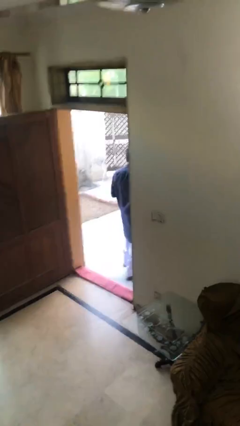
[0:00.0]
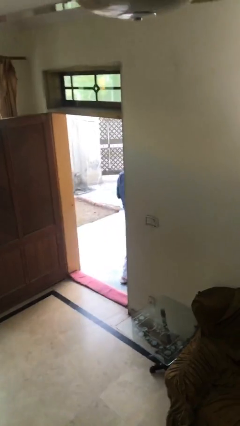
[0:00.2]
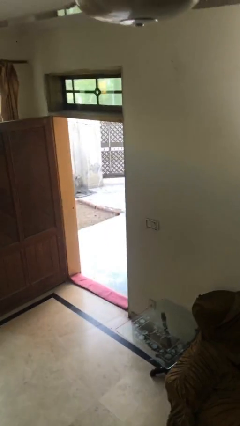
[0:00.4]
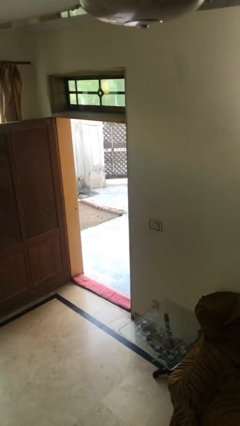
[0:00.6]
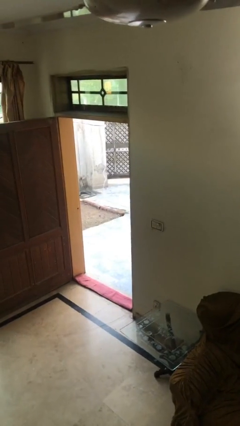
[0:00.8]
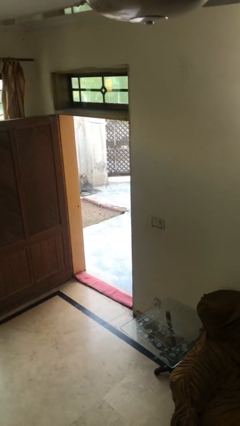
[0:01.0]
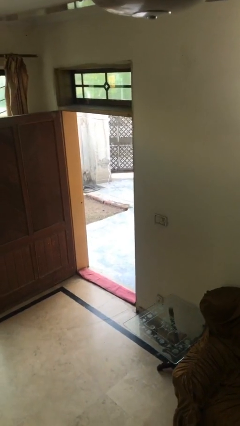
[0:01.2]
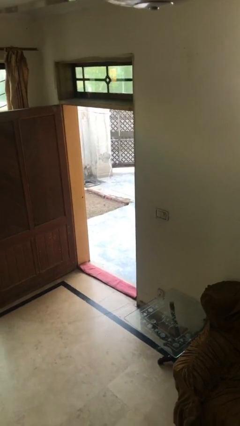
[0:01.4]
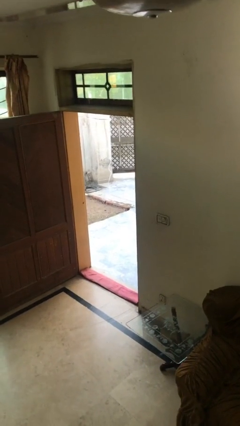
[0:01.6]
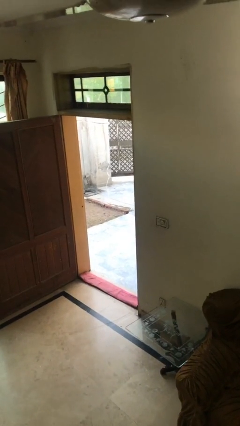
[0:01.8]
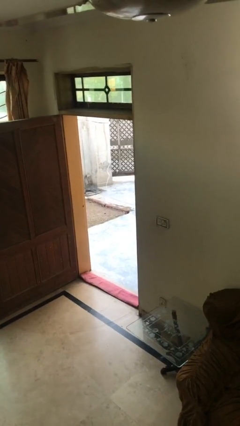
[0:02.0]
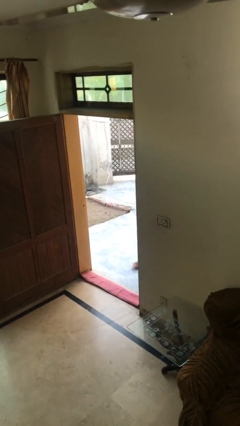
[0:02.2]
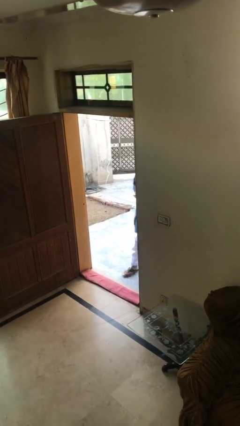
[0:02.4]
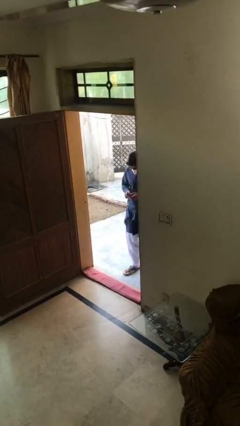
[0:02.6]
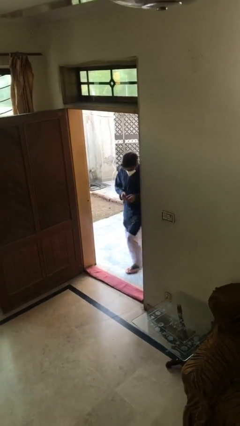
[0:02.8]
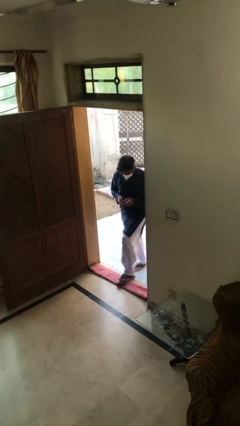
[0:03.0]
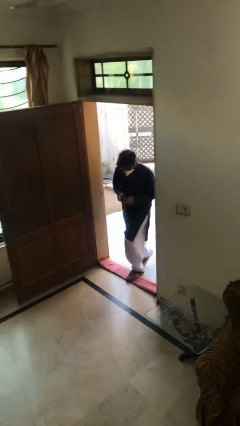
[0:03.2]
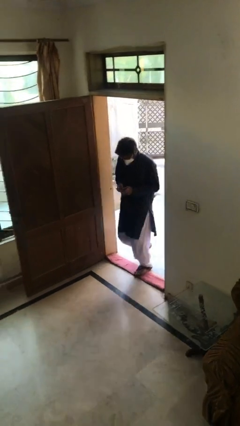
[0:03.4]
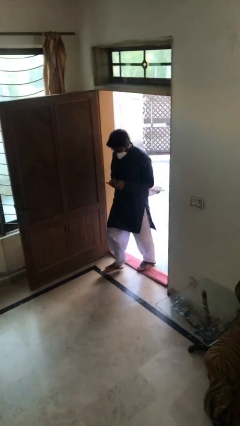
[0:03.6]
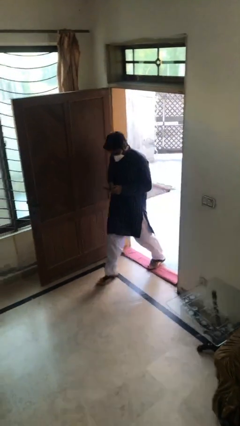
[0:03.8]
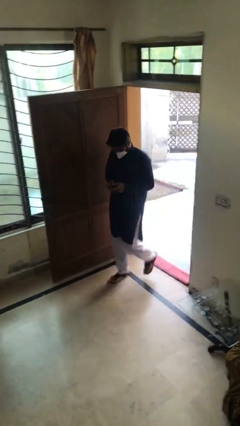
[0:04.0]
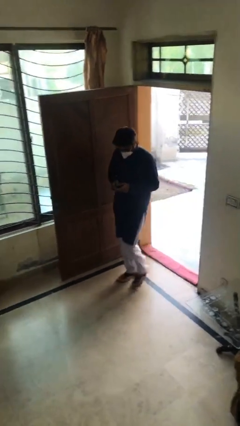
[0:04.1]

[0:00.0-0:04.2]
person enters scene through structure

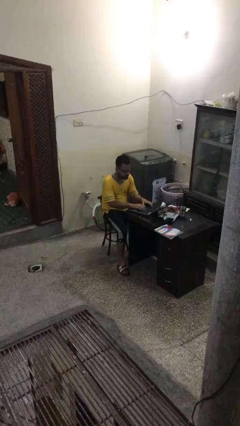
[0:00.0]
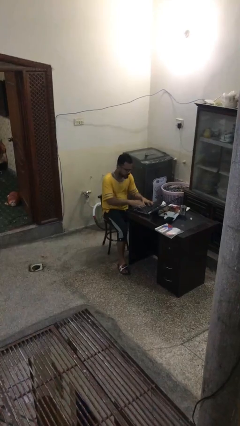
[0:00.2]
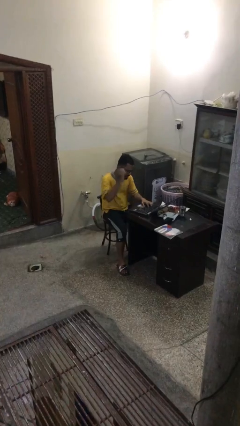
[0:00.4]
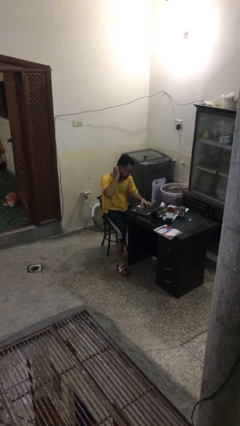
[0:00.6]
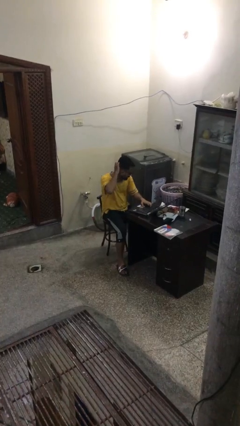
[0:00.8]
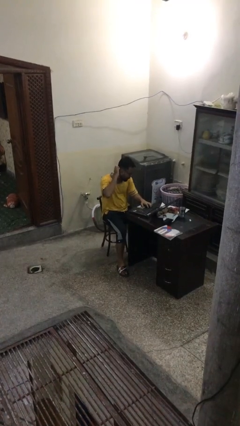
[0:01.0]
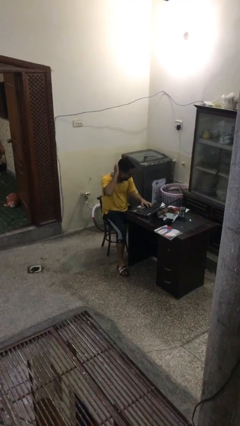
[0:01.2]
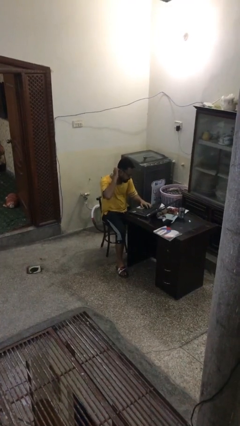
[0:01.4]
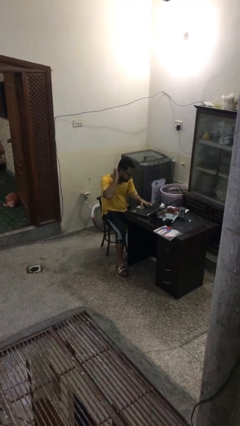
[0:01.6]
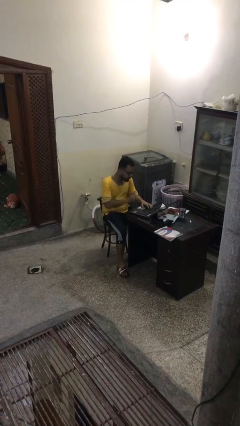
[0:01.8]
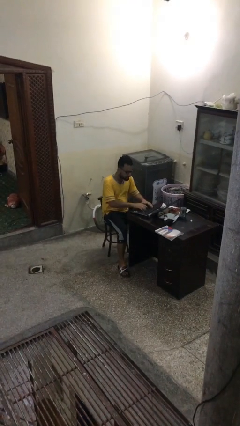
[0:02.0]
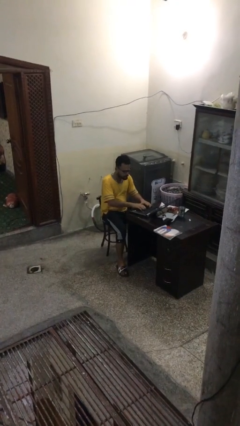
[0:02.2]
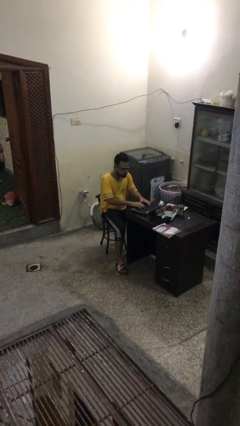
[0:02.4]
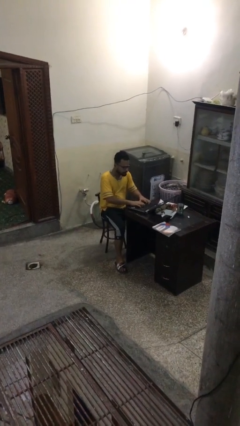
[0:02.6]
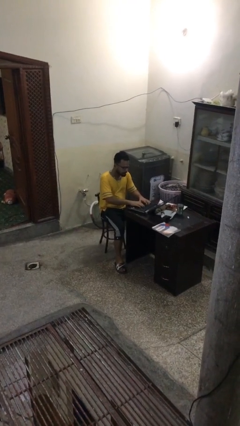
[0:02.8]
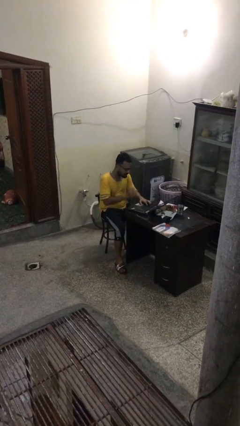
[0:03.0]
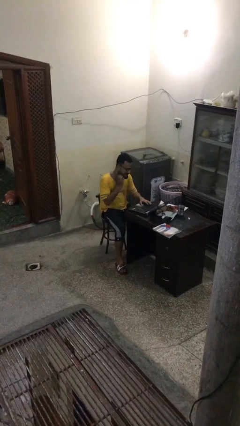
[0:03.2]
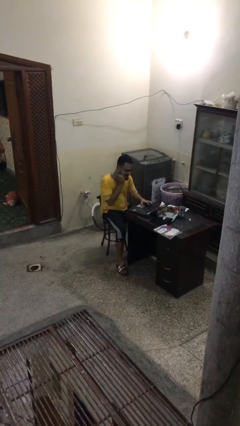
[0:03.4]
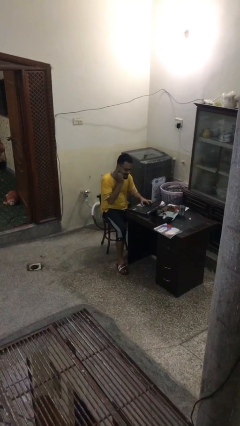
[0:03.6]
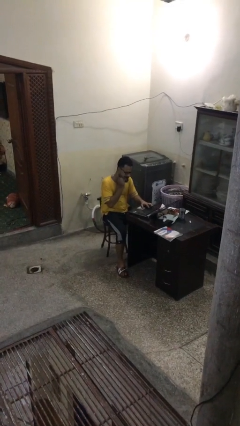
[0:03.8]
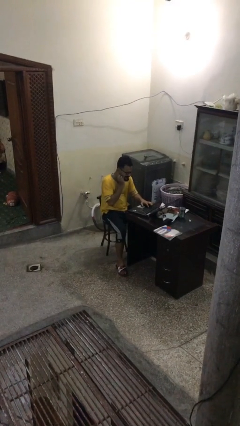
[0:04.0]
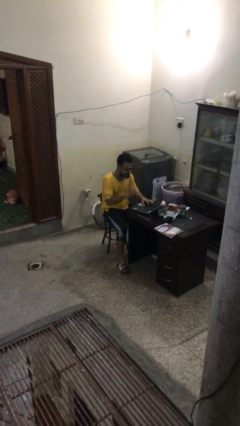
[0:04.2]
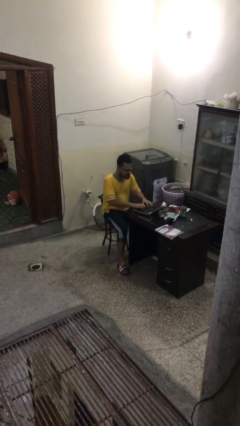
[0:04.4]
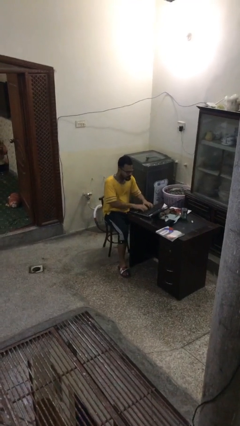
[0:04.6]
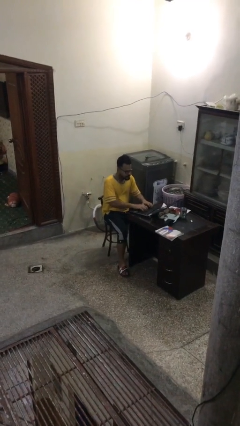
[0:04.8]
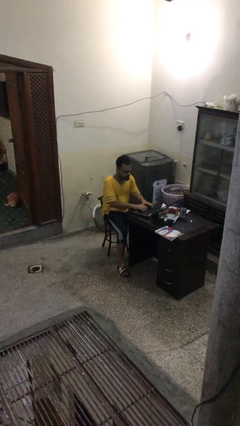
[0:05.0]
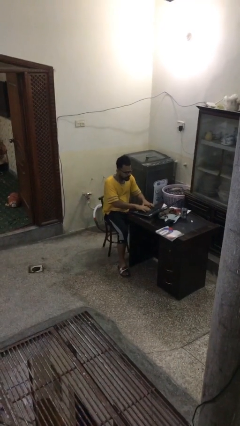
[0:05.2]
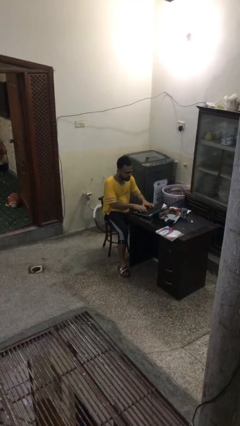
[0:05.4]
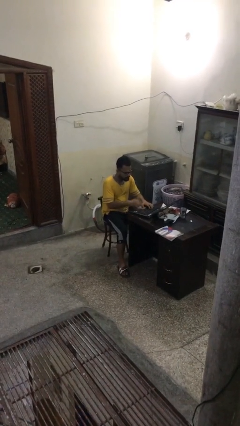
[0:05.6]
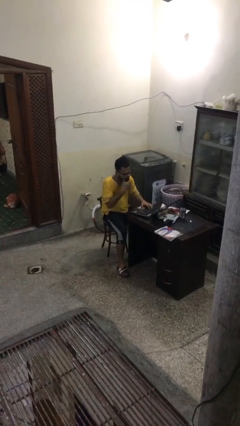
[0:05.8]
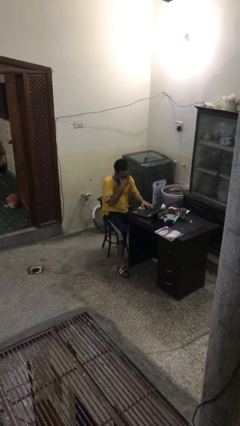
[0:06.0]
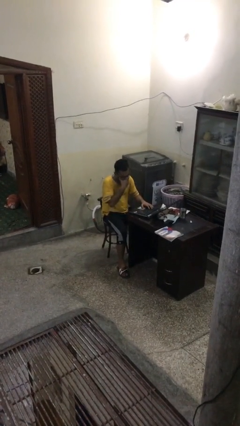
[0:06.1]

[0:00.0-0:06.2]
person interacts with laptop

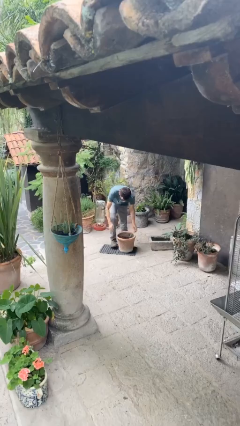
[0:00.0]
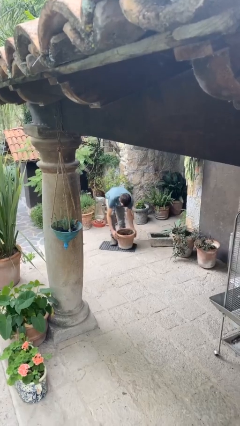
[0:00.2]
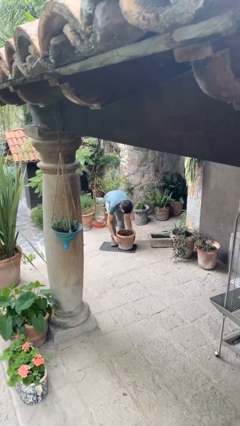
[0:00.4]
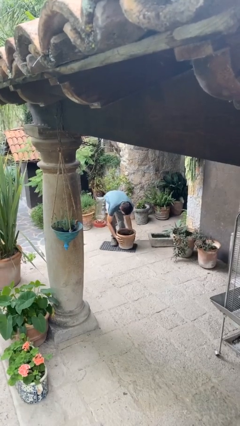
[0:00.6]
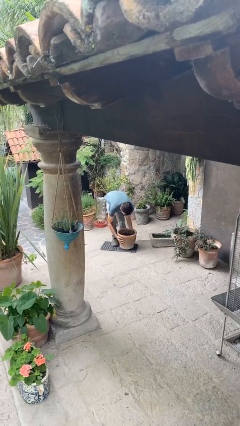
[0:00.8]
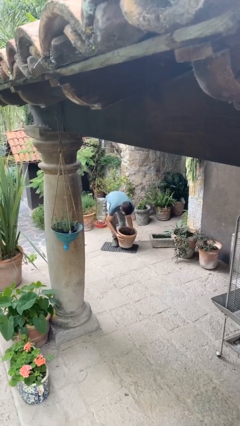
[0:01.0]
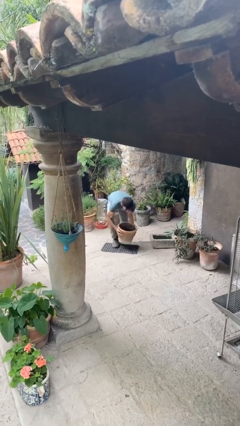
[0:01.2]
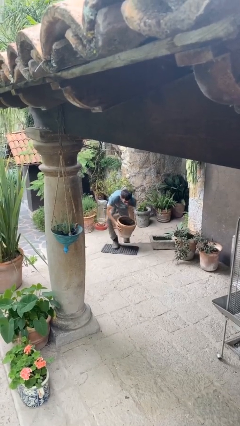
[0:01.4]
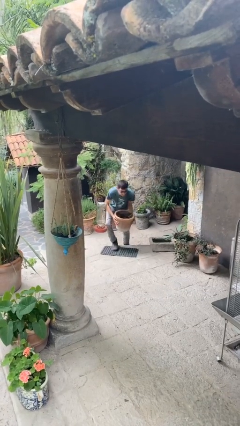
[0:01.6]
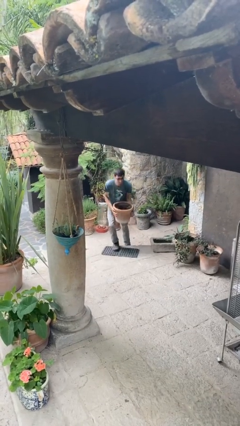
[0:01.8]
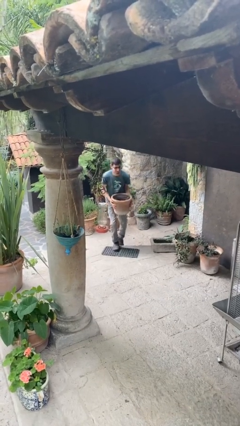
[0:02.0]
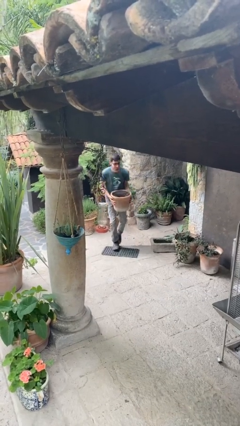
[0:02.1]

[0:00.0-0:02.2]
person picks up object from floor

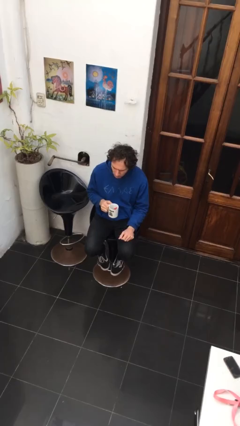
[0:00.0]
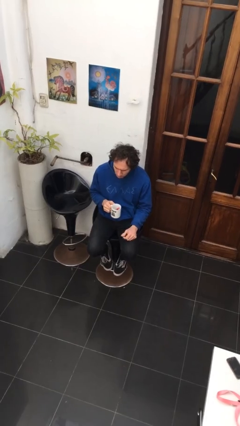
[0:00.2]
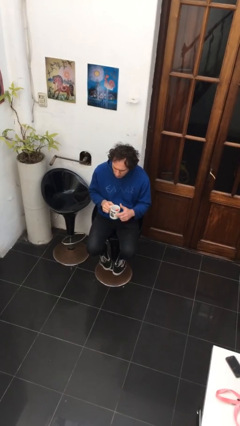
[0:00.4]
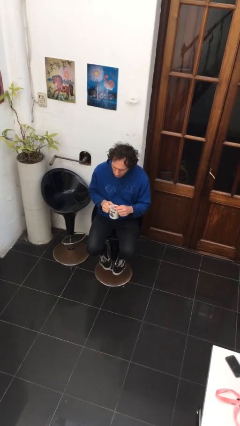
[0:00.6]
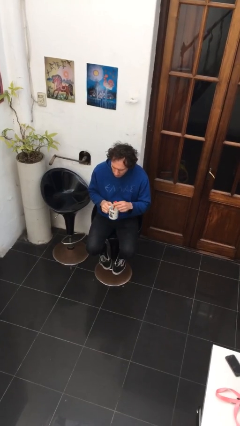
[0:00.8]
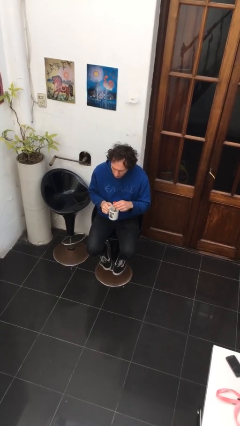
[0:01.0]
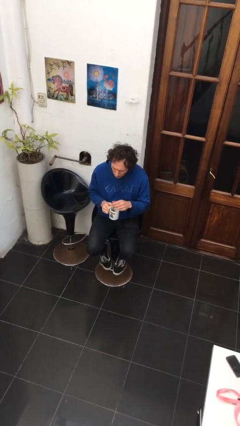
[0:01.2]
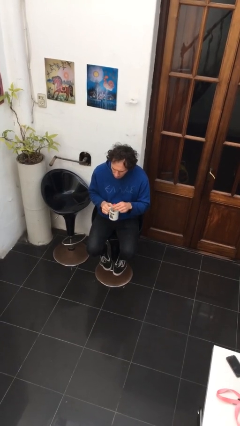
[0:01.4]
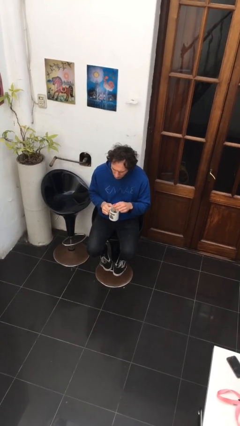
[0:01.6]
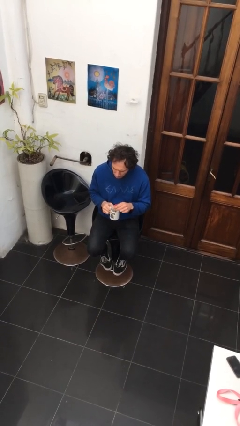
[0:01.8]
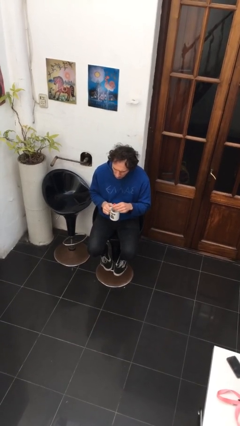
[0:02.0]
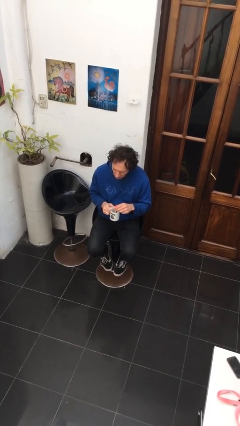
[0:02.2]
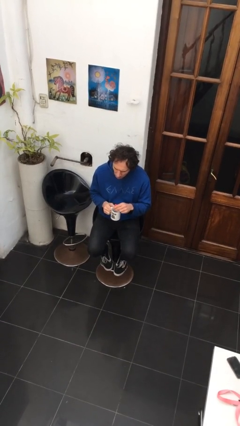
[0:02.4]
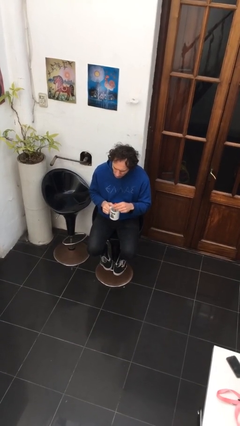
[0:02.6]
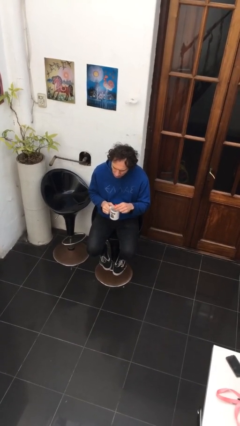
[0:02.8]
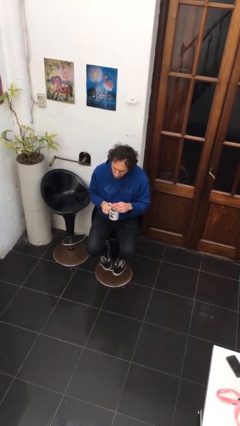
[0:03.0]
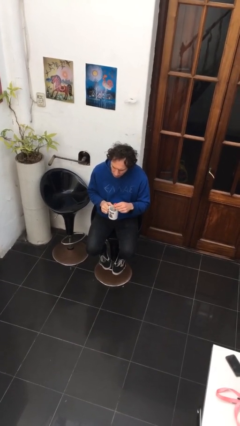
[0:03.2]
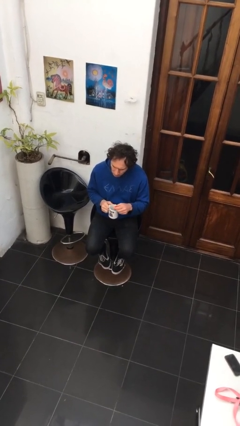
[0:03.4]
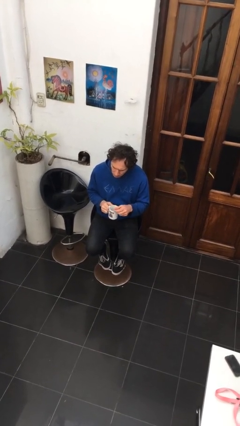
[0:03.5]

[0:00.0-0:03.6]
person stirs mug

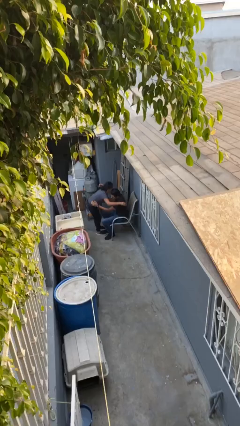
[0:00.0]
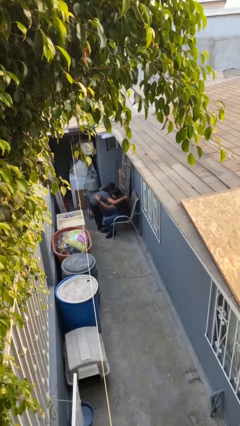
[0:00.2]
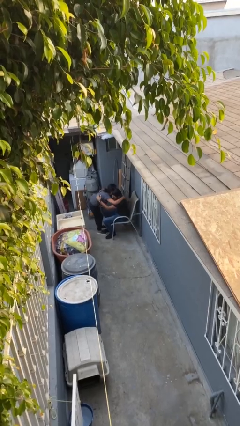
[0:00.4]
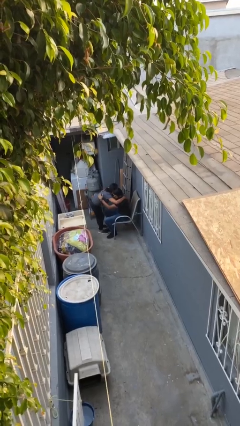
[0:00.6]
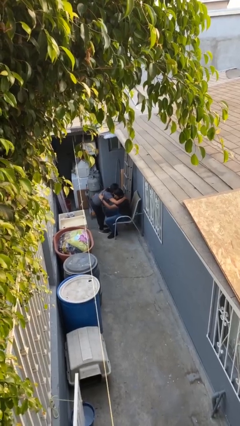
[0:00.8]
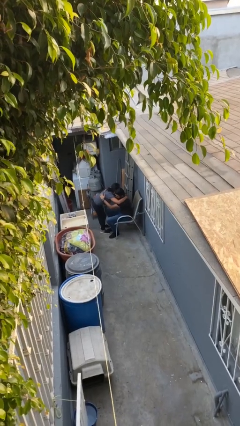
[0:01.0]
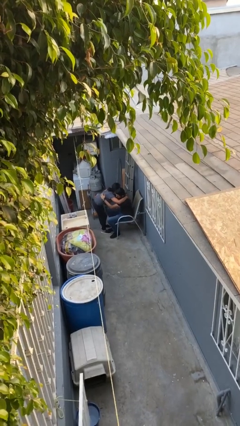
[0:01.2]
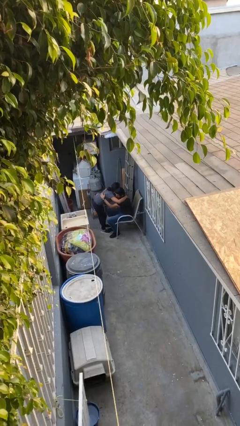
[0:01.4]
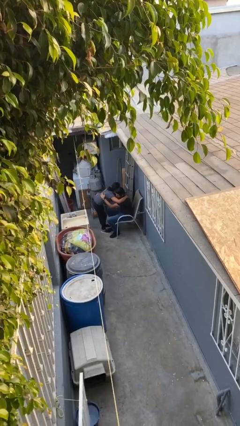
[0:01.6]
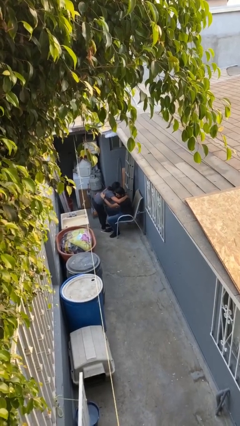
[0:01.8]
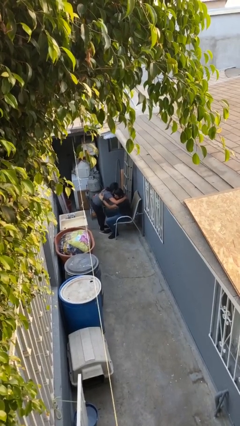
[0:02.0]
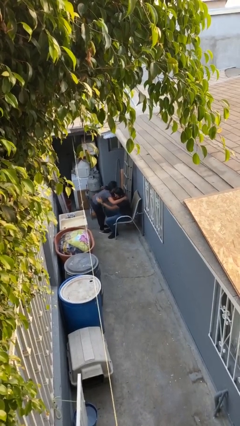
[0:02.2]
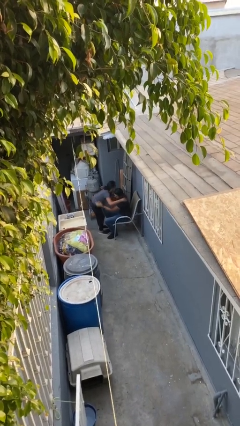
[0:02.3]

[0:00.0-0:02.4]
person embraces person
